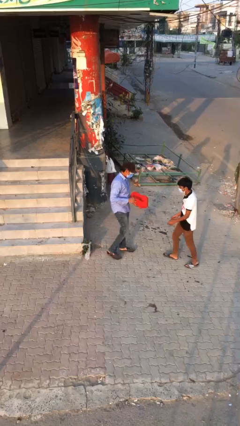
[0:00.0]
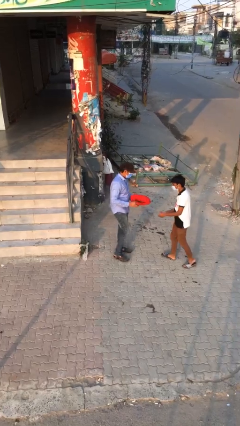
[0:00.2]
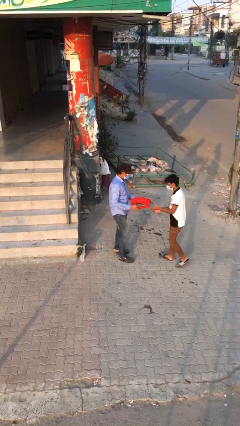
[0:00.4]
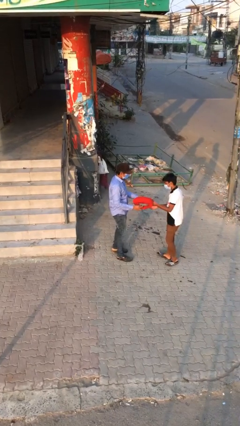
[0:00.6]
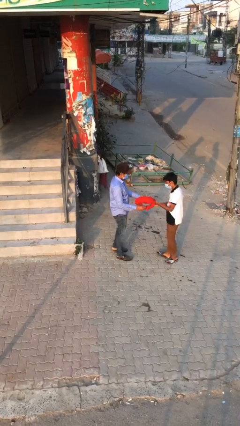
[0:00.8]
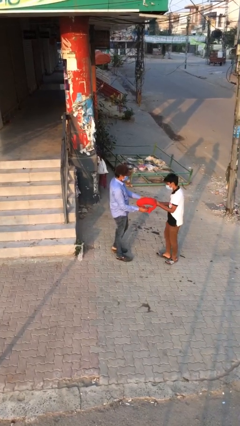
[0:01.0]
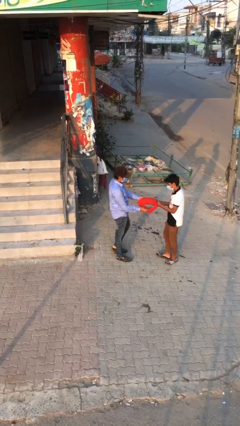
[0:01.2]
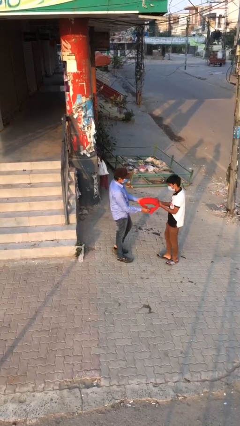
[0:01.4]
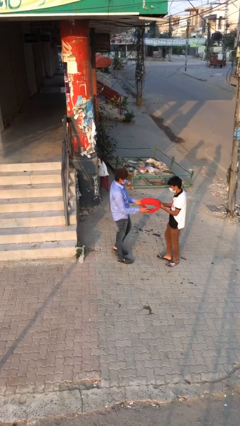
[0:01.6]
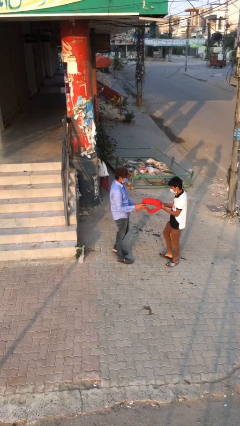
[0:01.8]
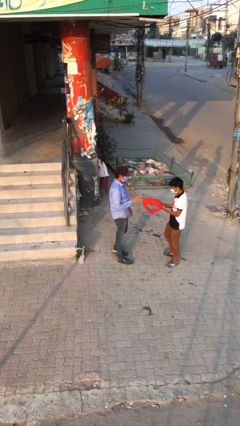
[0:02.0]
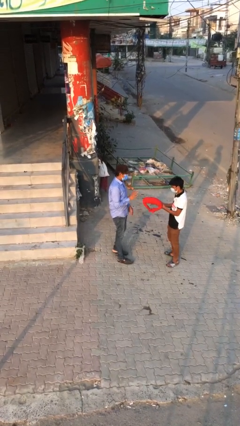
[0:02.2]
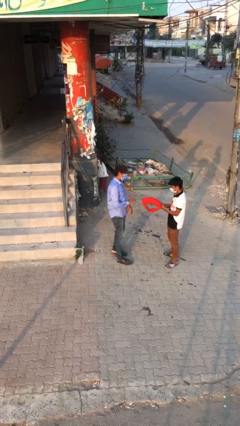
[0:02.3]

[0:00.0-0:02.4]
person transfers object to person

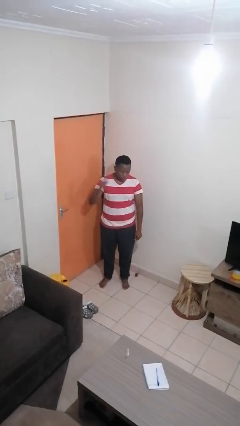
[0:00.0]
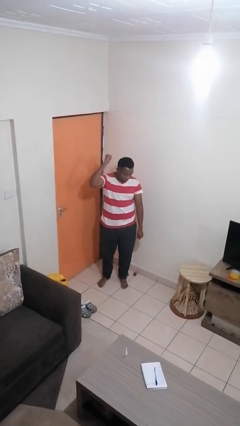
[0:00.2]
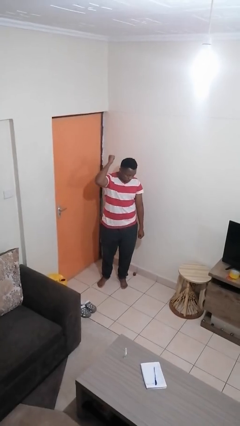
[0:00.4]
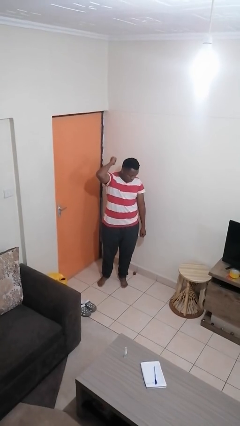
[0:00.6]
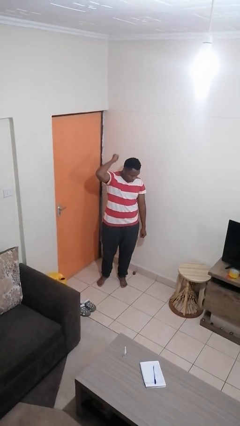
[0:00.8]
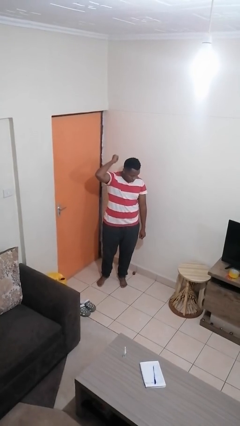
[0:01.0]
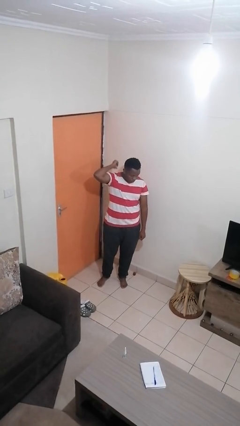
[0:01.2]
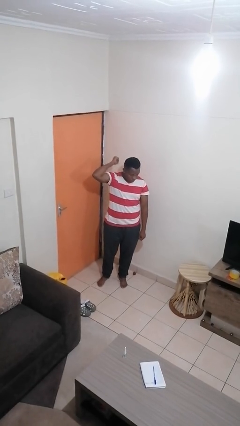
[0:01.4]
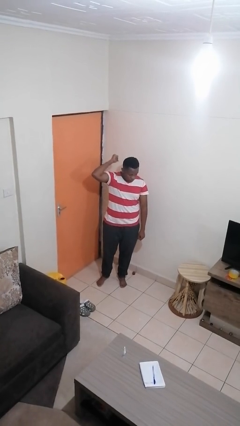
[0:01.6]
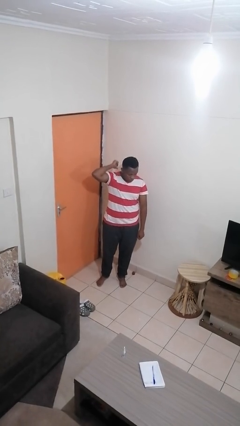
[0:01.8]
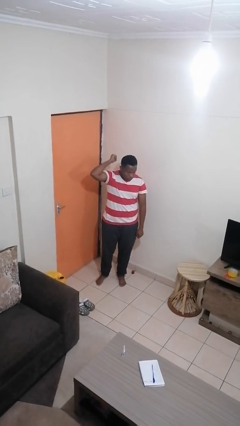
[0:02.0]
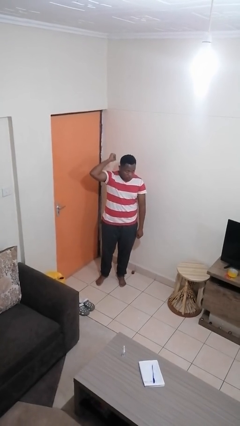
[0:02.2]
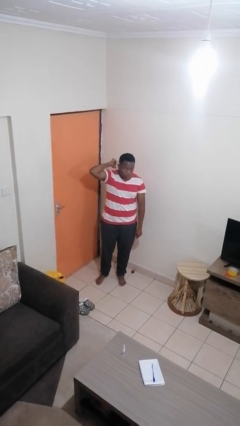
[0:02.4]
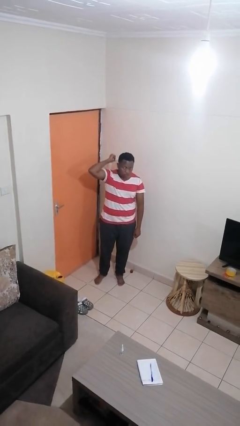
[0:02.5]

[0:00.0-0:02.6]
person gestures behind me

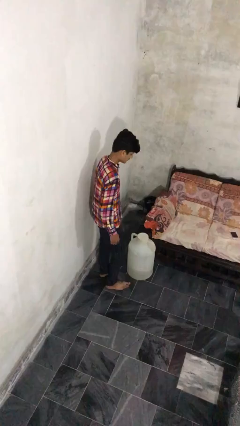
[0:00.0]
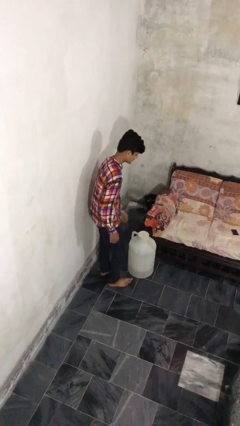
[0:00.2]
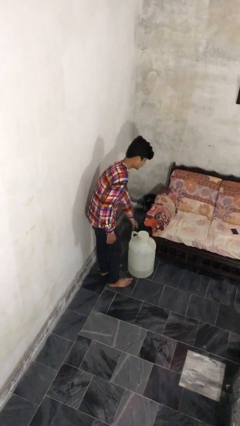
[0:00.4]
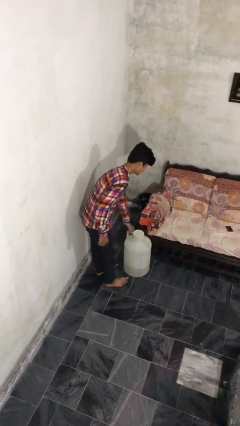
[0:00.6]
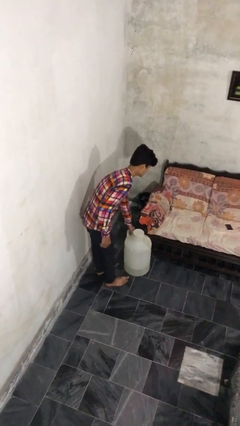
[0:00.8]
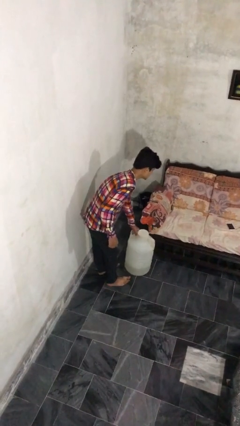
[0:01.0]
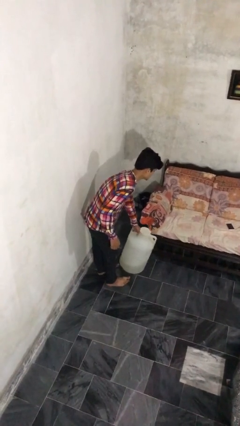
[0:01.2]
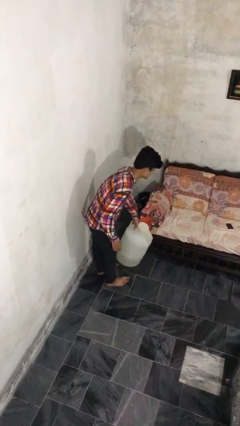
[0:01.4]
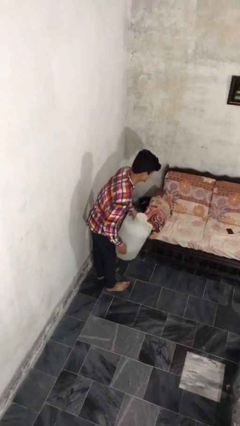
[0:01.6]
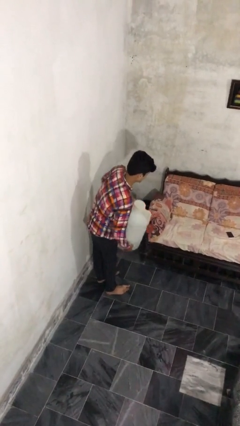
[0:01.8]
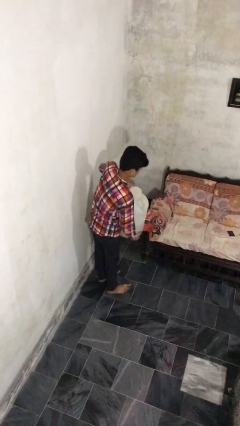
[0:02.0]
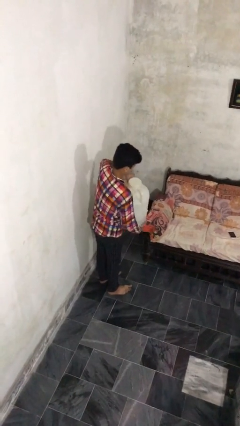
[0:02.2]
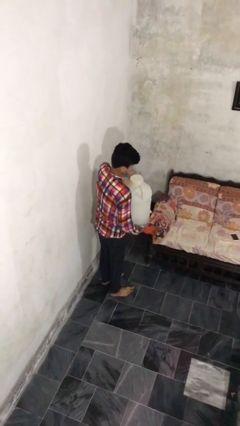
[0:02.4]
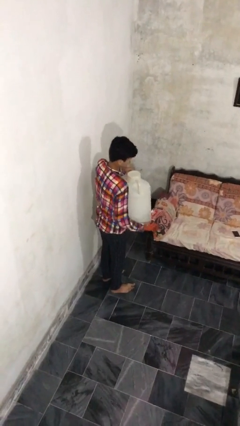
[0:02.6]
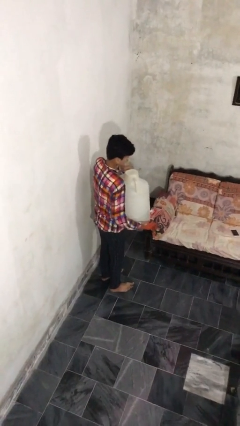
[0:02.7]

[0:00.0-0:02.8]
person picks up object from floor

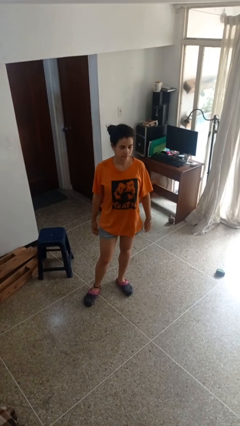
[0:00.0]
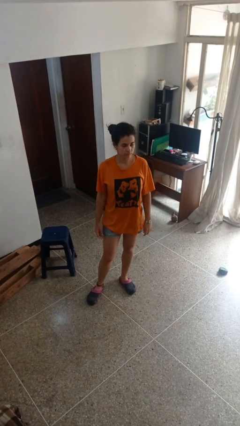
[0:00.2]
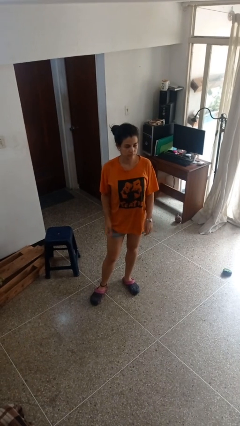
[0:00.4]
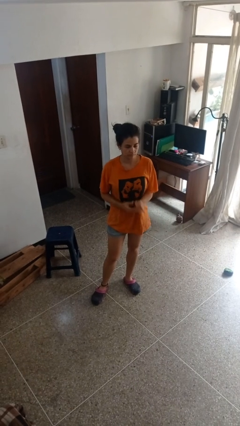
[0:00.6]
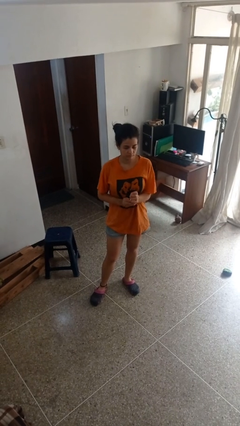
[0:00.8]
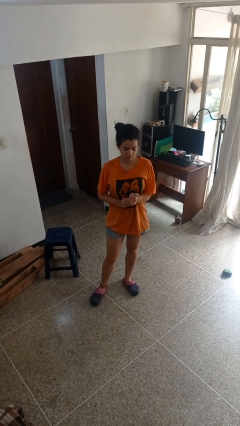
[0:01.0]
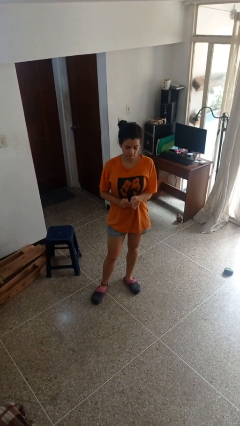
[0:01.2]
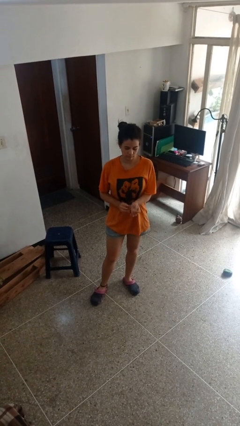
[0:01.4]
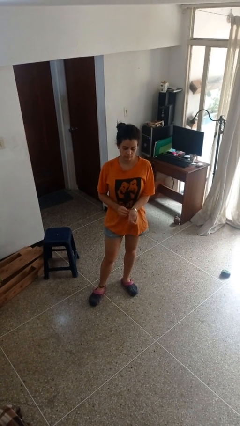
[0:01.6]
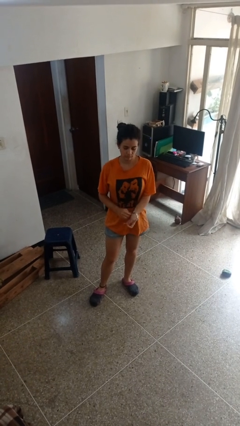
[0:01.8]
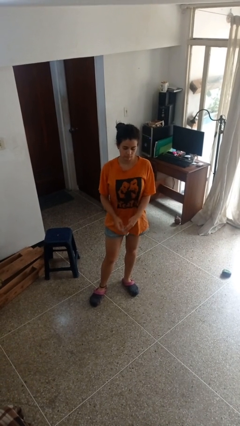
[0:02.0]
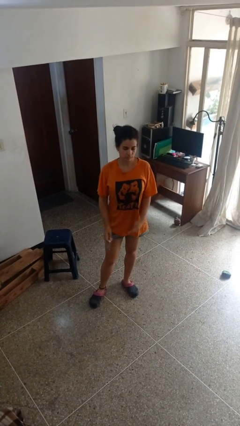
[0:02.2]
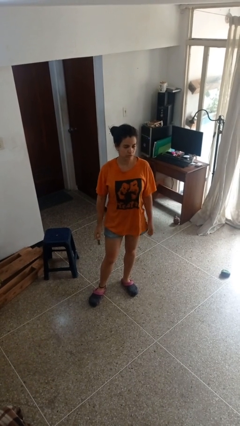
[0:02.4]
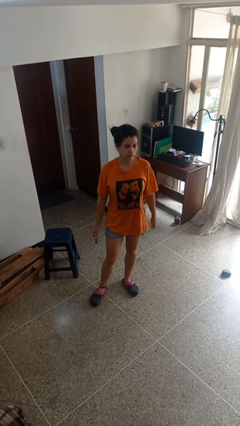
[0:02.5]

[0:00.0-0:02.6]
person takes off wristwatch

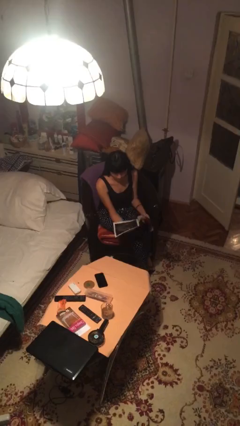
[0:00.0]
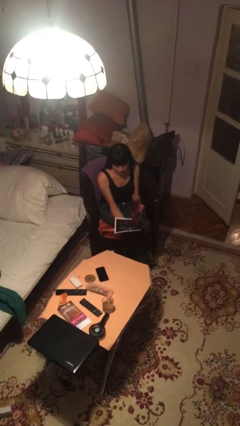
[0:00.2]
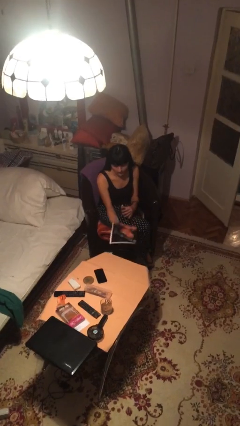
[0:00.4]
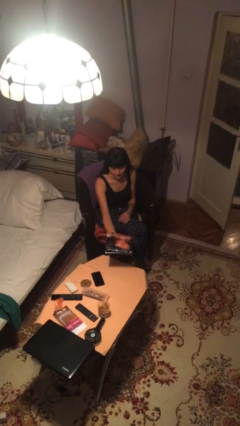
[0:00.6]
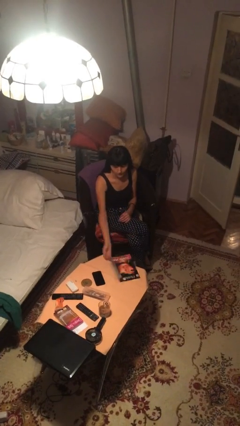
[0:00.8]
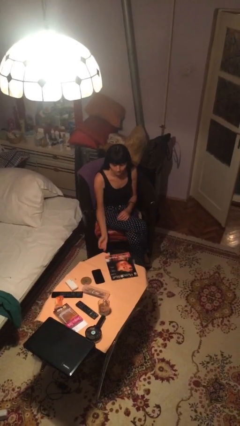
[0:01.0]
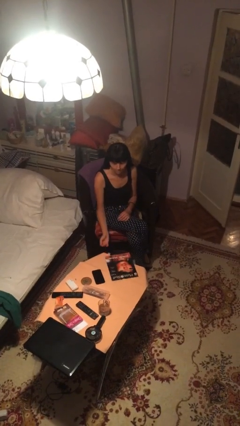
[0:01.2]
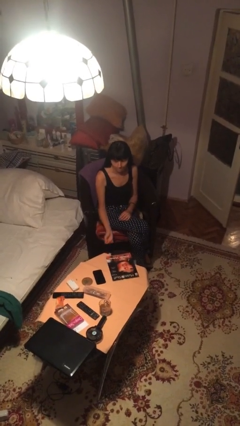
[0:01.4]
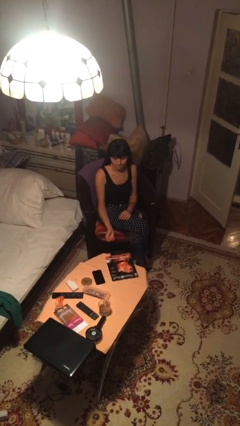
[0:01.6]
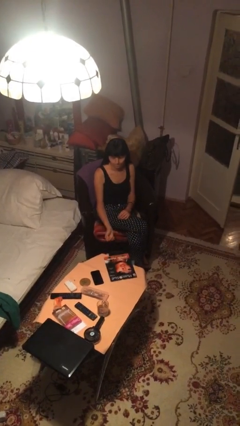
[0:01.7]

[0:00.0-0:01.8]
person puts down object on table

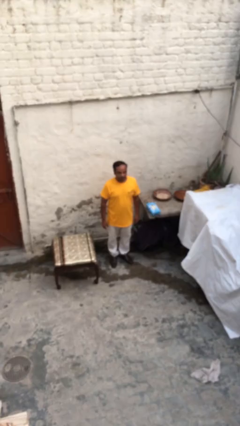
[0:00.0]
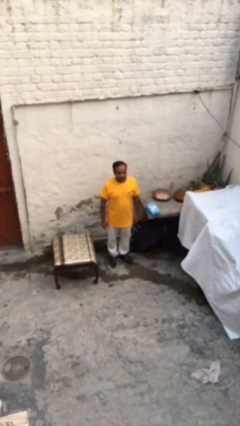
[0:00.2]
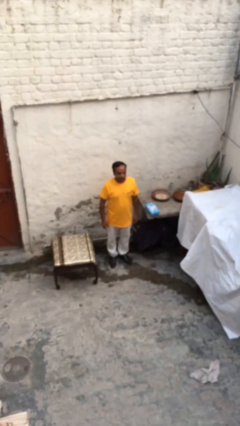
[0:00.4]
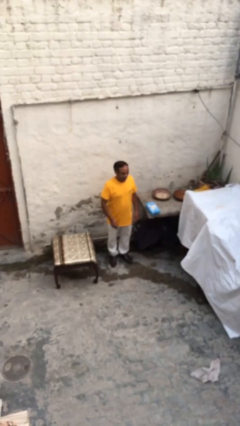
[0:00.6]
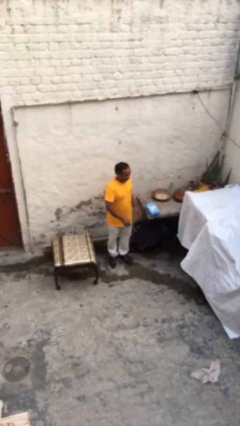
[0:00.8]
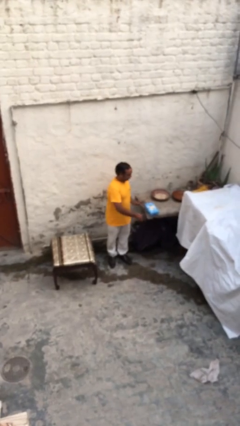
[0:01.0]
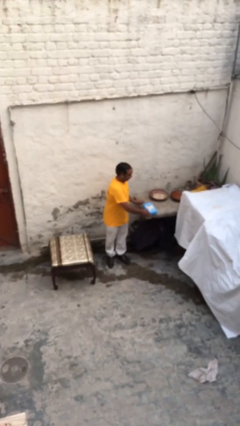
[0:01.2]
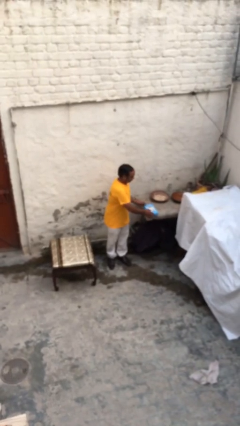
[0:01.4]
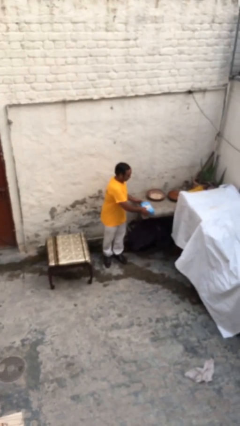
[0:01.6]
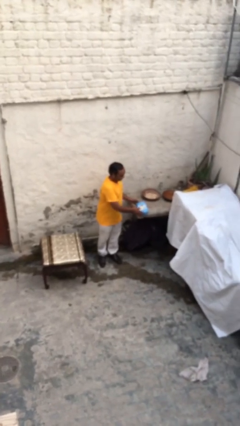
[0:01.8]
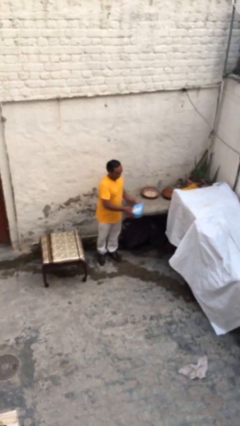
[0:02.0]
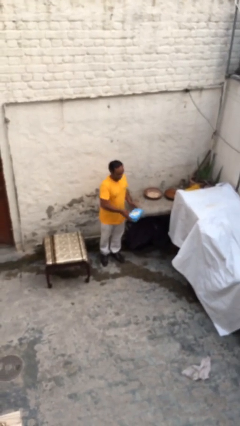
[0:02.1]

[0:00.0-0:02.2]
person picks up object from shelf

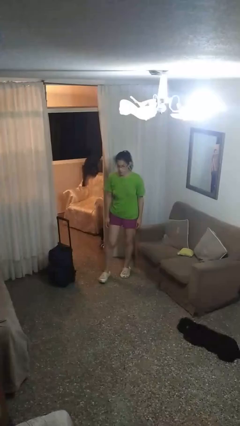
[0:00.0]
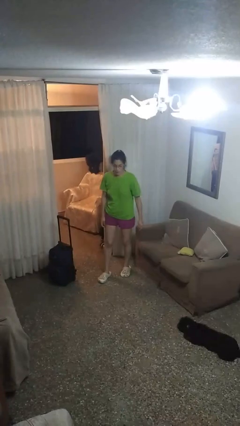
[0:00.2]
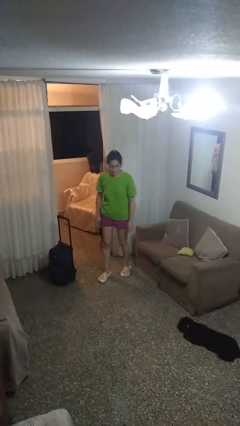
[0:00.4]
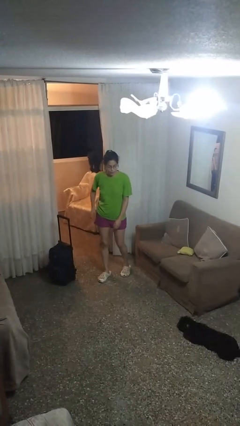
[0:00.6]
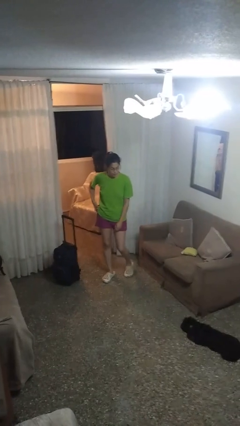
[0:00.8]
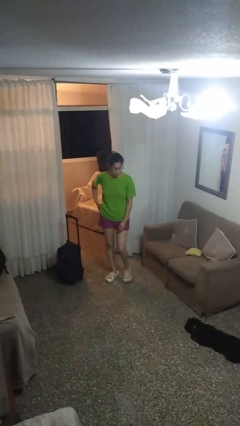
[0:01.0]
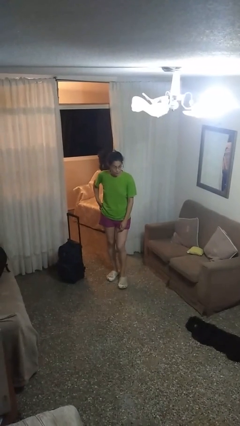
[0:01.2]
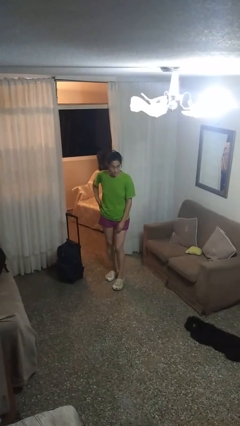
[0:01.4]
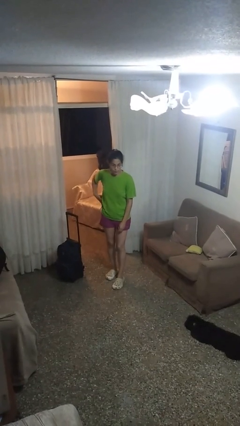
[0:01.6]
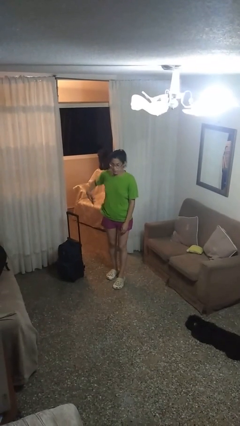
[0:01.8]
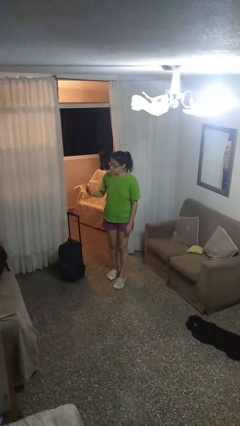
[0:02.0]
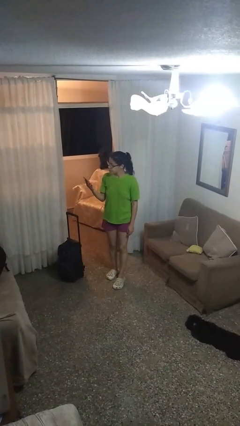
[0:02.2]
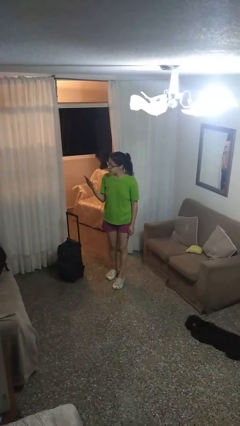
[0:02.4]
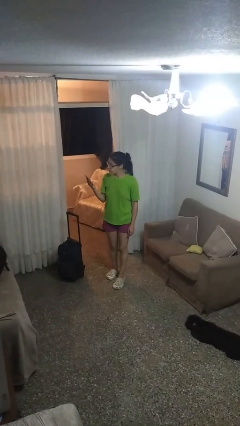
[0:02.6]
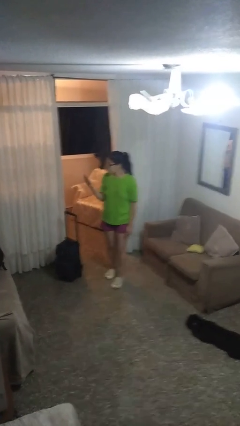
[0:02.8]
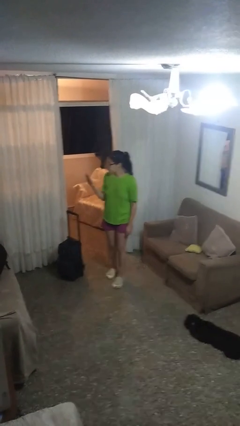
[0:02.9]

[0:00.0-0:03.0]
person takes phone from pocket
